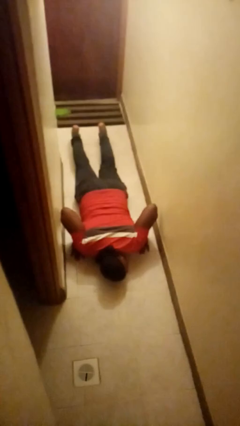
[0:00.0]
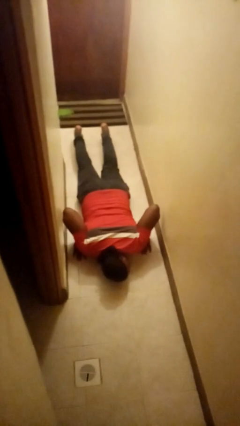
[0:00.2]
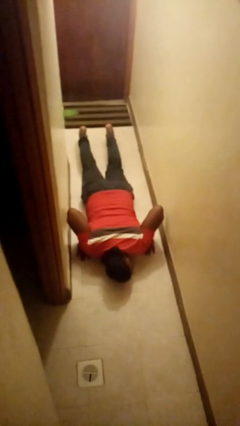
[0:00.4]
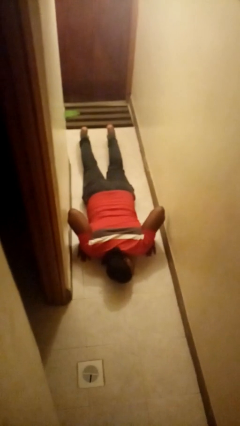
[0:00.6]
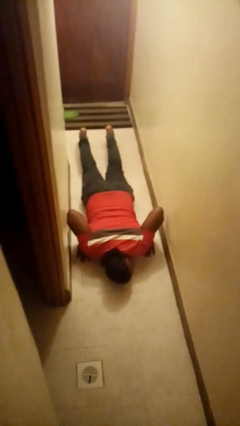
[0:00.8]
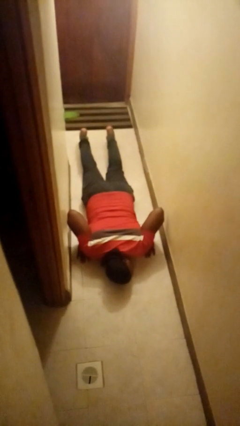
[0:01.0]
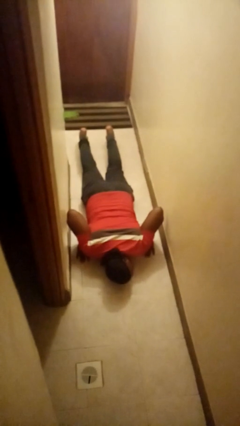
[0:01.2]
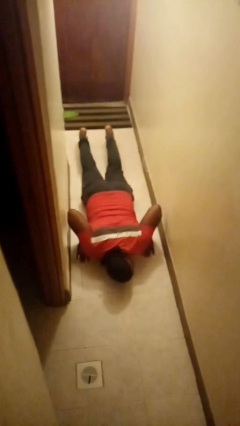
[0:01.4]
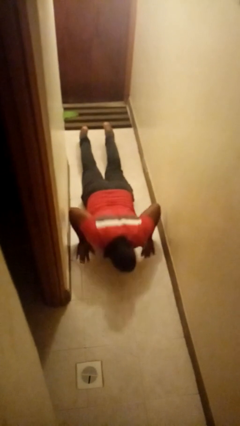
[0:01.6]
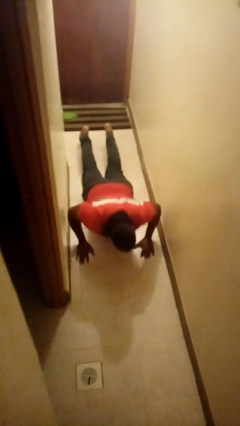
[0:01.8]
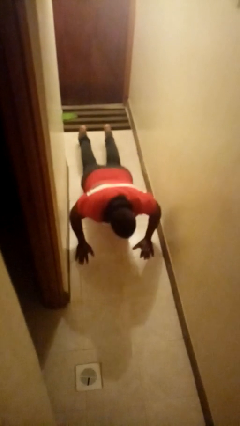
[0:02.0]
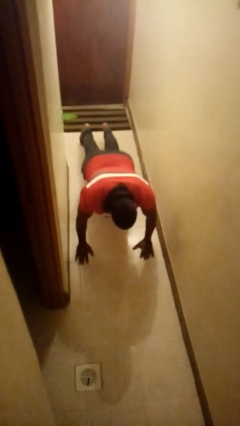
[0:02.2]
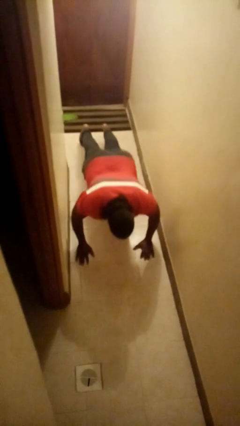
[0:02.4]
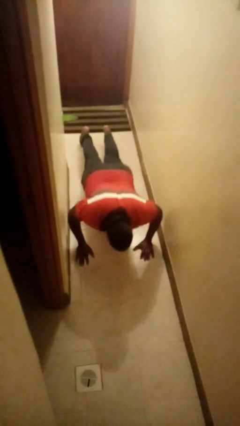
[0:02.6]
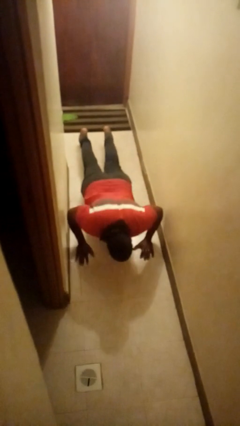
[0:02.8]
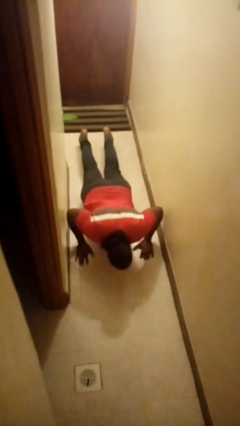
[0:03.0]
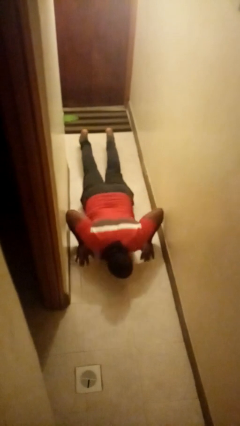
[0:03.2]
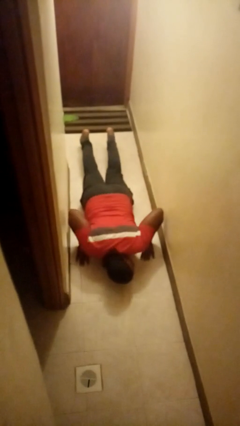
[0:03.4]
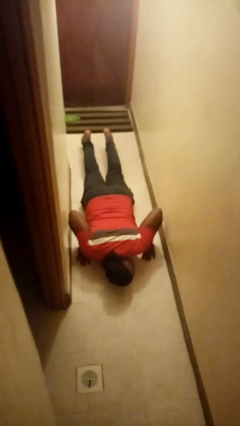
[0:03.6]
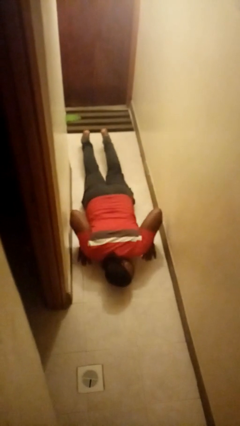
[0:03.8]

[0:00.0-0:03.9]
person exercises with pushup

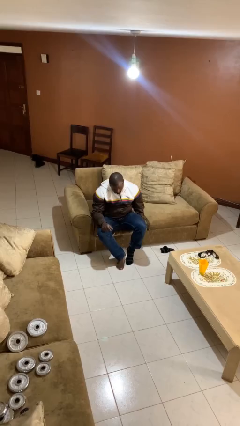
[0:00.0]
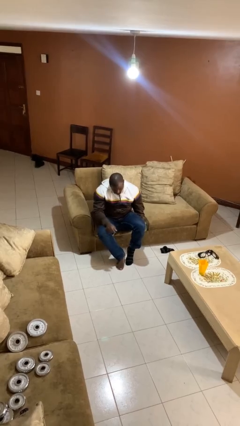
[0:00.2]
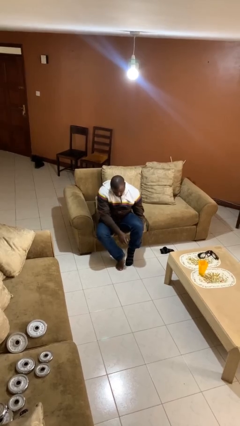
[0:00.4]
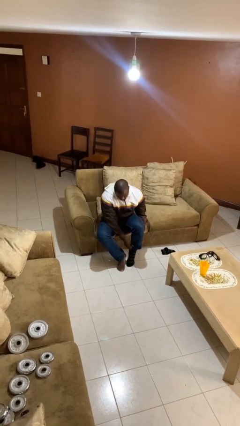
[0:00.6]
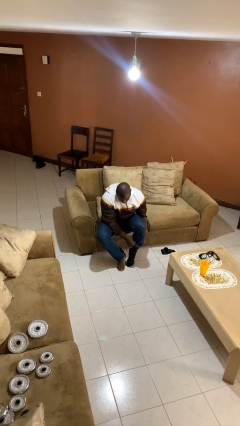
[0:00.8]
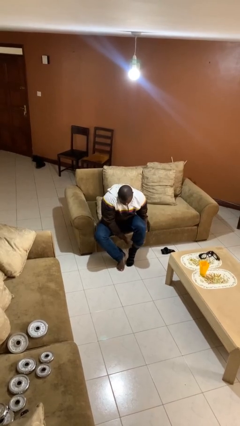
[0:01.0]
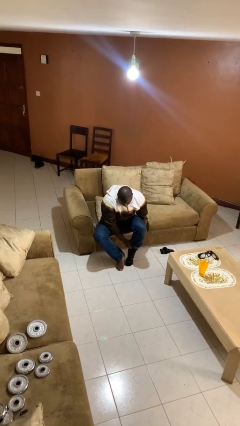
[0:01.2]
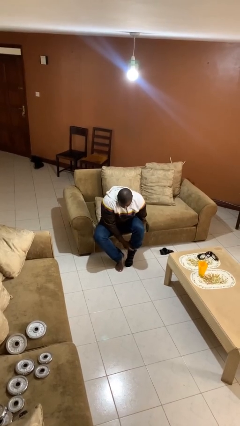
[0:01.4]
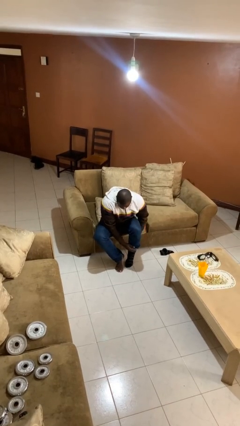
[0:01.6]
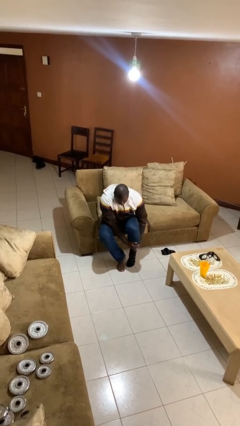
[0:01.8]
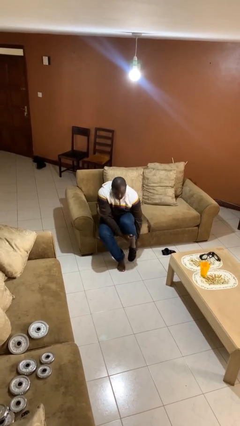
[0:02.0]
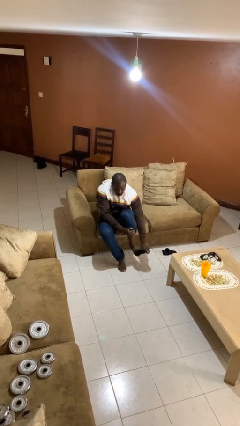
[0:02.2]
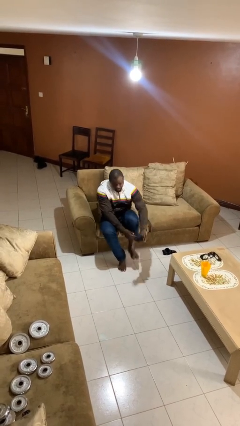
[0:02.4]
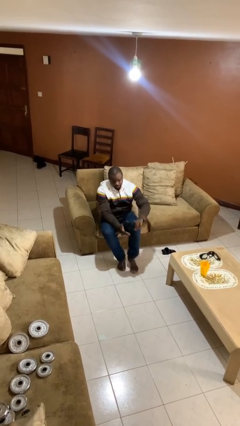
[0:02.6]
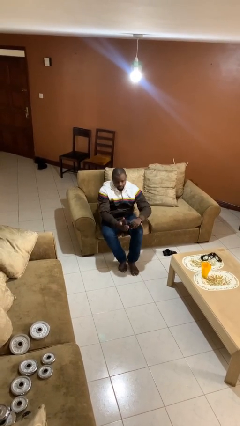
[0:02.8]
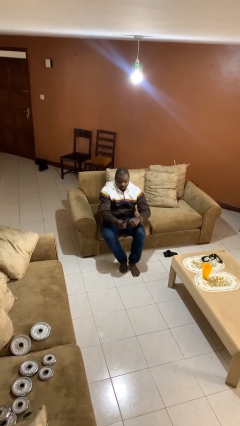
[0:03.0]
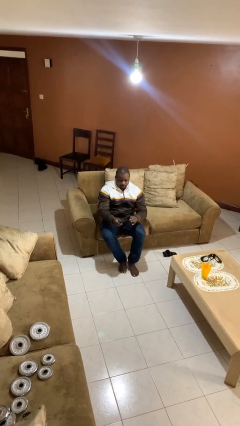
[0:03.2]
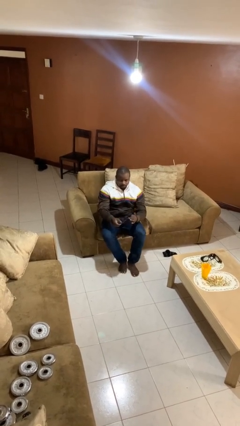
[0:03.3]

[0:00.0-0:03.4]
person takes off socks

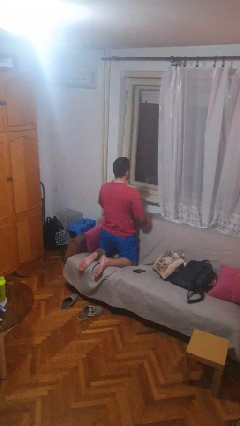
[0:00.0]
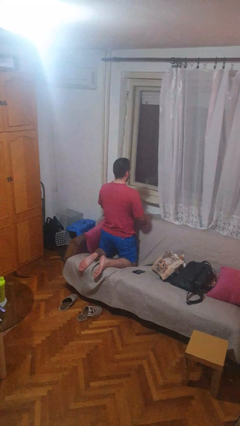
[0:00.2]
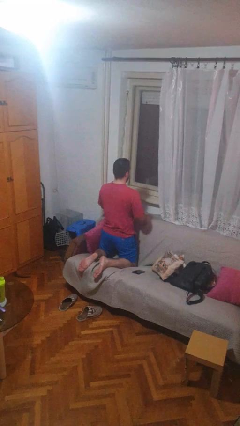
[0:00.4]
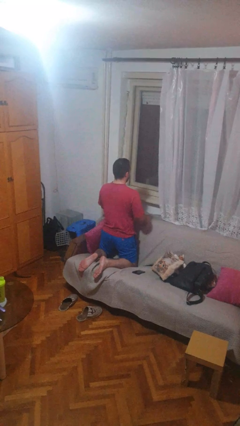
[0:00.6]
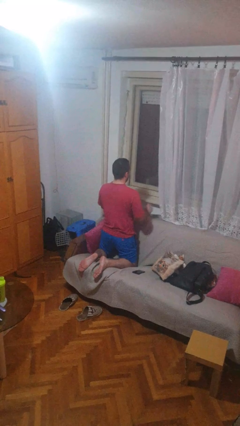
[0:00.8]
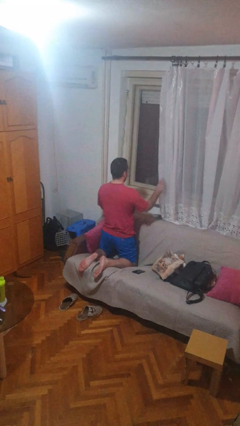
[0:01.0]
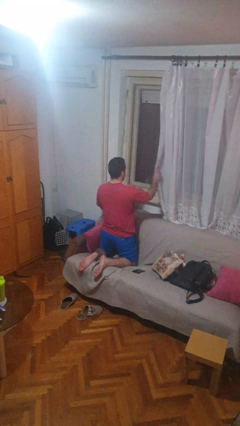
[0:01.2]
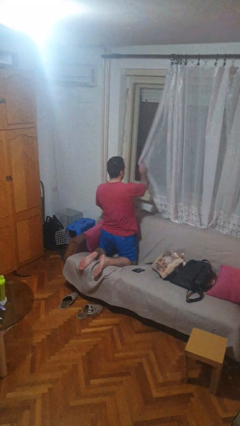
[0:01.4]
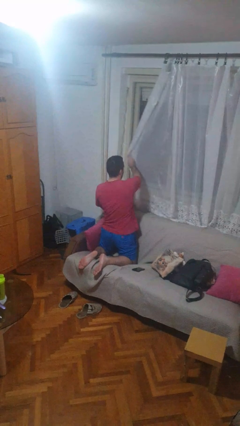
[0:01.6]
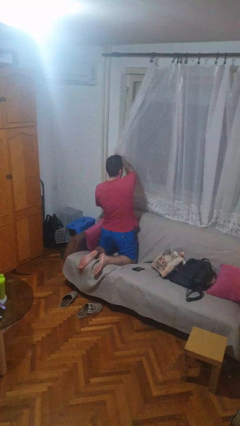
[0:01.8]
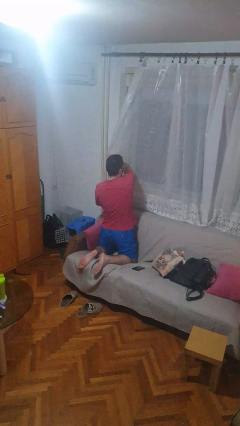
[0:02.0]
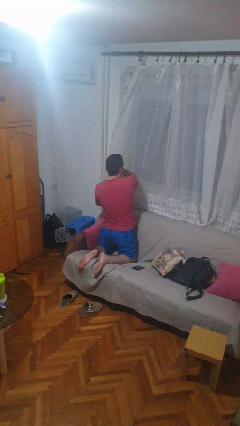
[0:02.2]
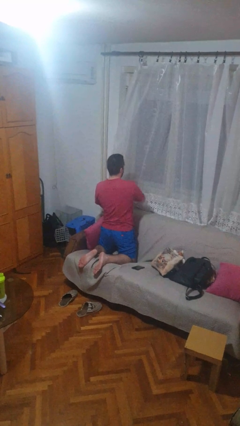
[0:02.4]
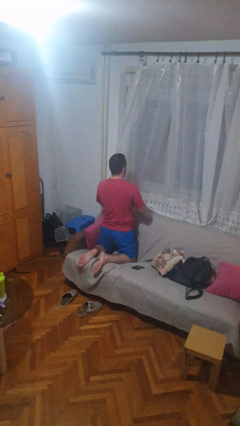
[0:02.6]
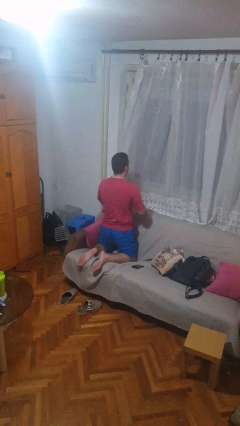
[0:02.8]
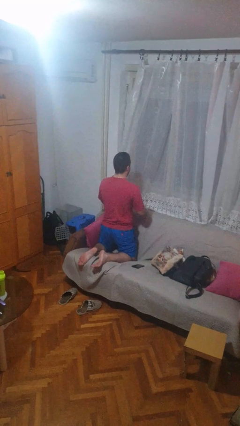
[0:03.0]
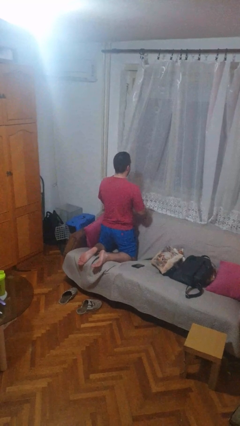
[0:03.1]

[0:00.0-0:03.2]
person closes curtains

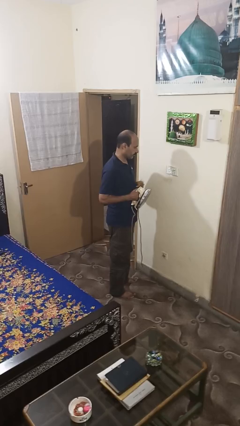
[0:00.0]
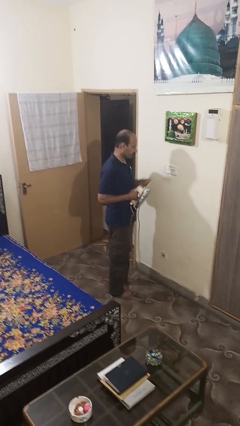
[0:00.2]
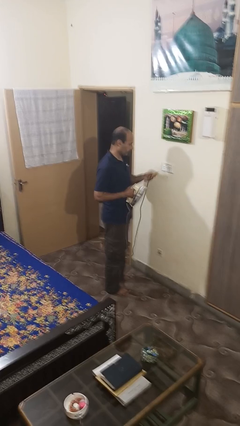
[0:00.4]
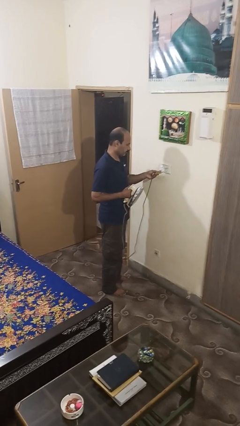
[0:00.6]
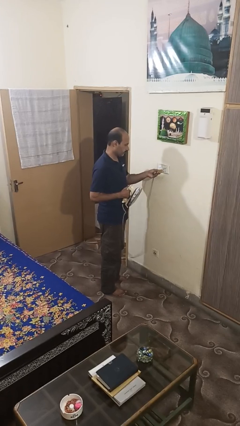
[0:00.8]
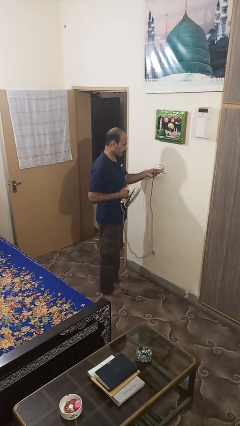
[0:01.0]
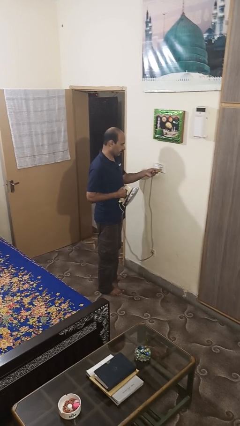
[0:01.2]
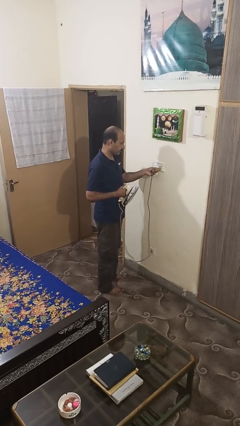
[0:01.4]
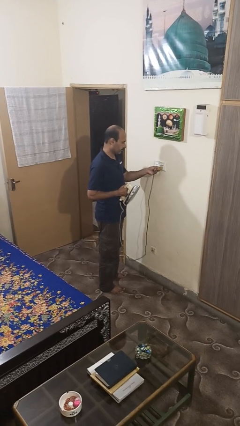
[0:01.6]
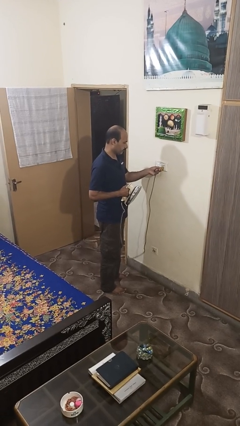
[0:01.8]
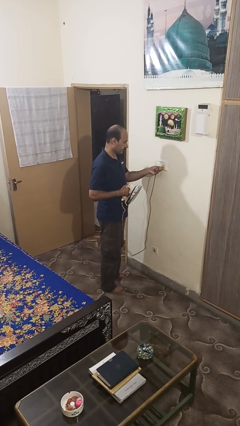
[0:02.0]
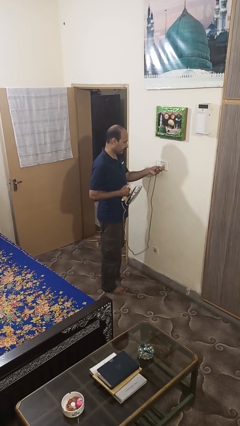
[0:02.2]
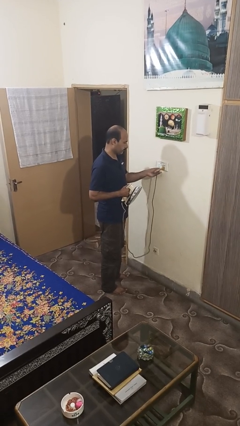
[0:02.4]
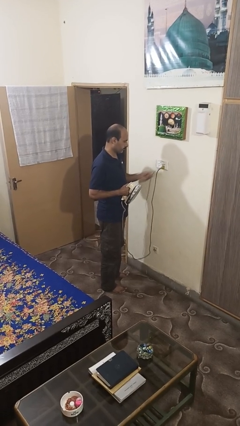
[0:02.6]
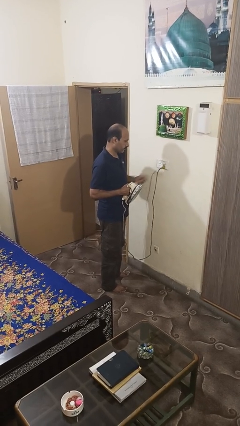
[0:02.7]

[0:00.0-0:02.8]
person plugs into electrical socket

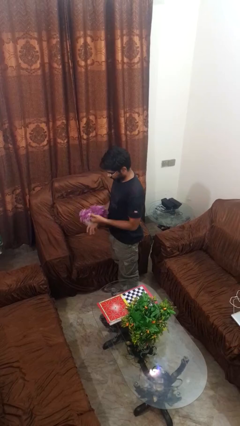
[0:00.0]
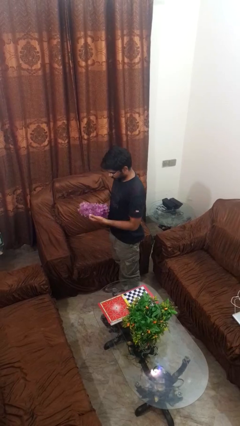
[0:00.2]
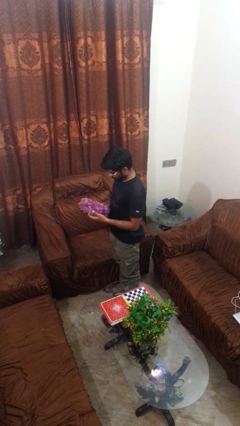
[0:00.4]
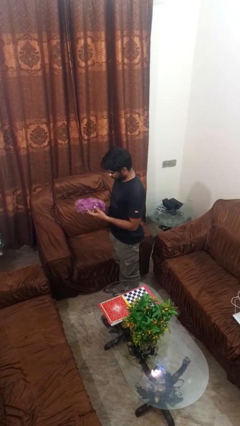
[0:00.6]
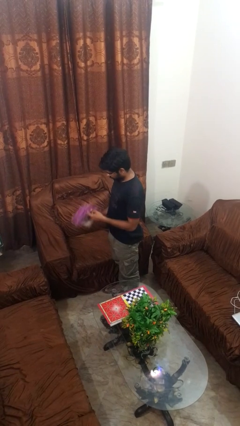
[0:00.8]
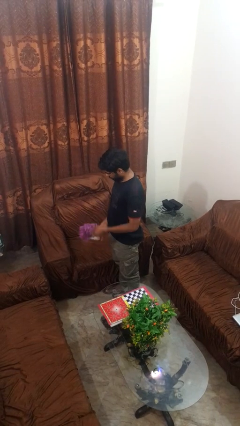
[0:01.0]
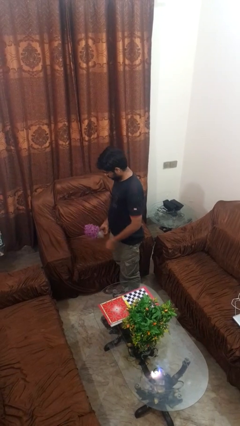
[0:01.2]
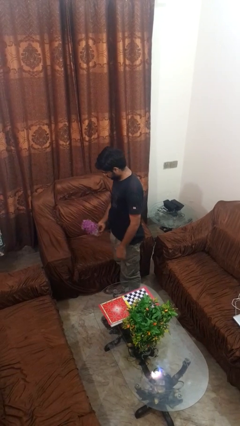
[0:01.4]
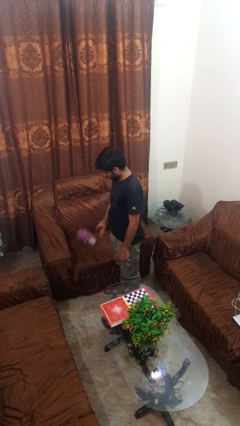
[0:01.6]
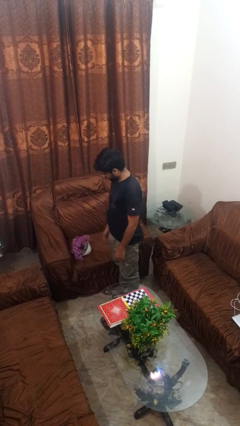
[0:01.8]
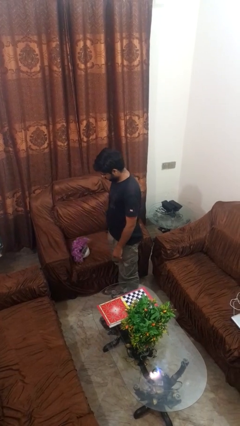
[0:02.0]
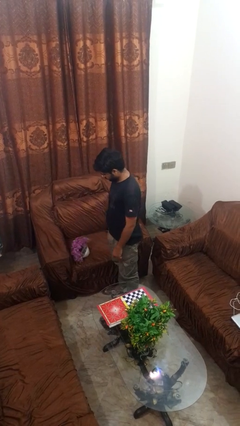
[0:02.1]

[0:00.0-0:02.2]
person puts down object on couch

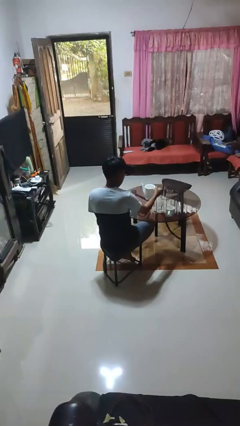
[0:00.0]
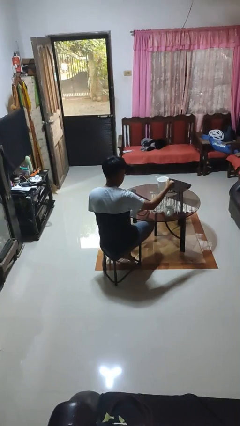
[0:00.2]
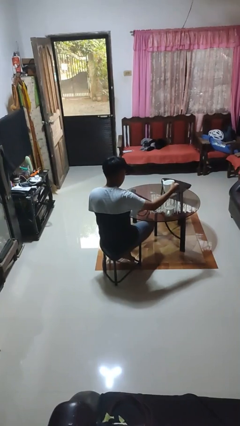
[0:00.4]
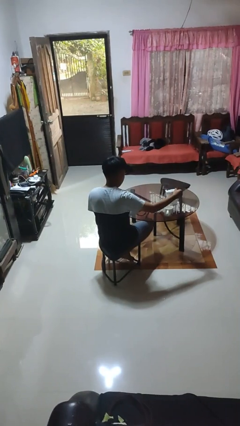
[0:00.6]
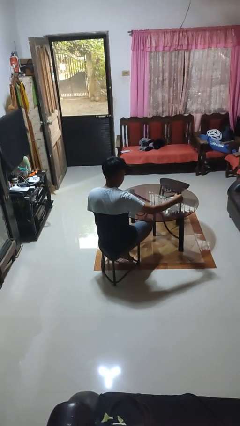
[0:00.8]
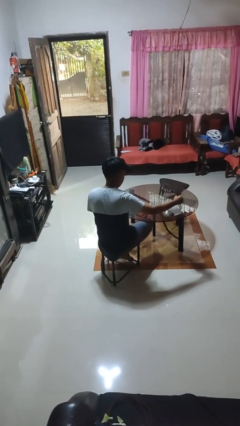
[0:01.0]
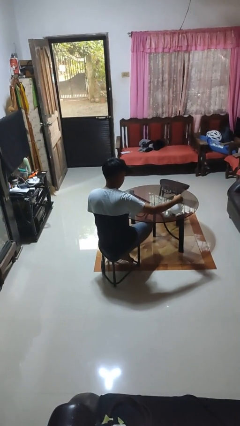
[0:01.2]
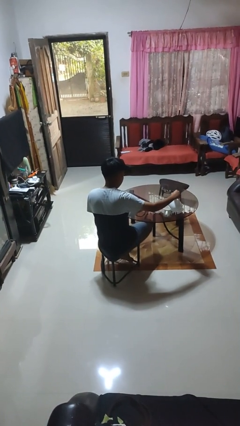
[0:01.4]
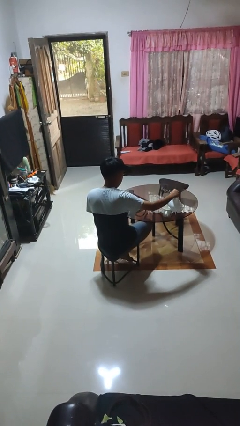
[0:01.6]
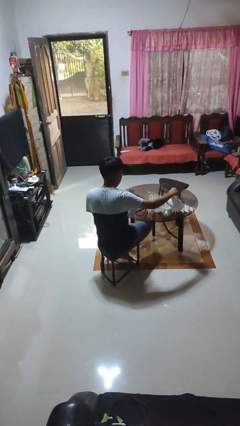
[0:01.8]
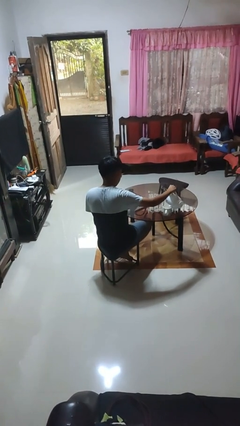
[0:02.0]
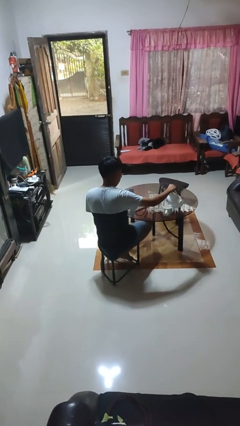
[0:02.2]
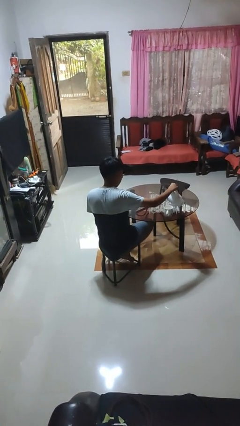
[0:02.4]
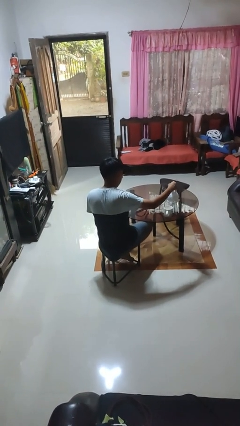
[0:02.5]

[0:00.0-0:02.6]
person pours coffee into mug
